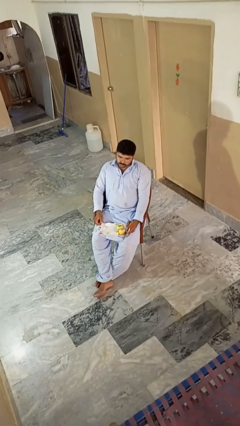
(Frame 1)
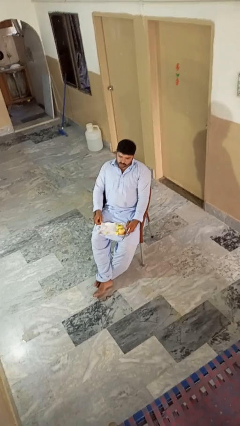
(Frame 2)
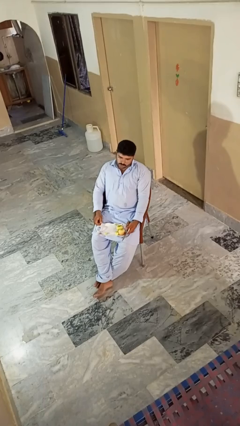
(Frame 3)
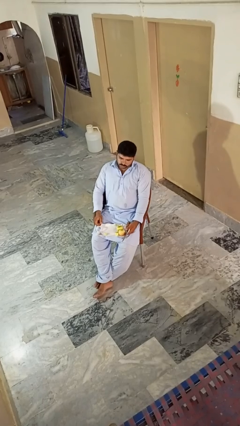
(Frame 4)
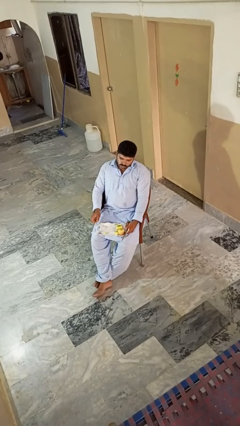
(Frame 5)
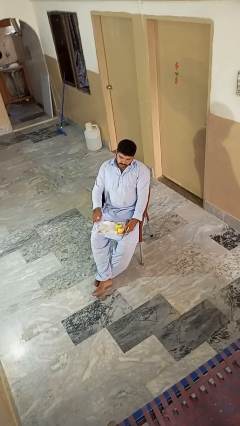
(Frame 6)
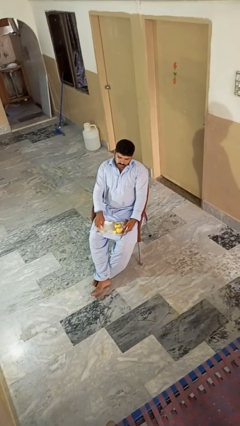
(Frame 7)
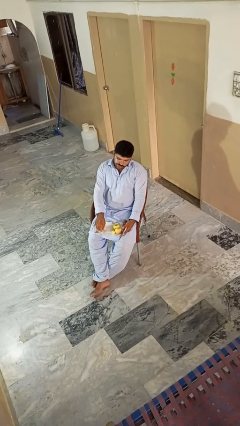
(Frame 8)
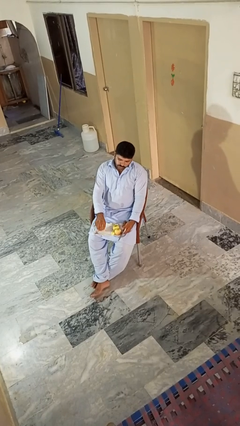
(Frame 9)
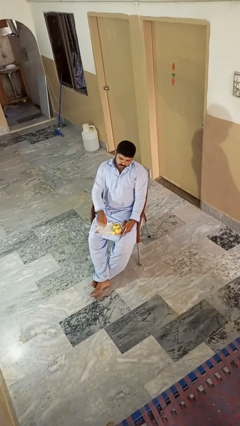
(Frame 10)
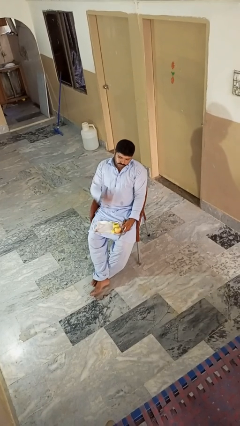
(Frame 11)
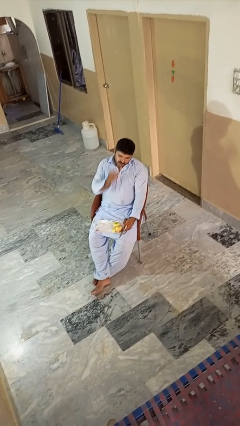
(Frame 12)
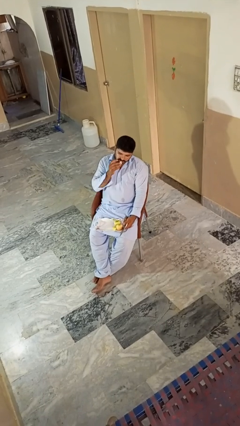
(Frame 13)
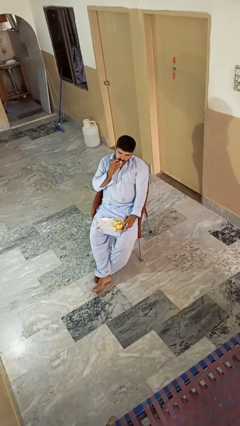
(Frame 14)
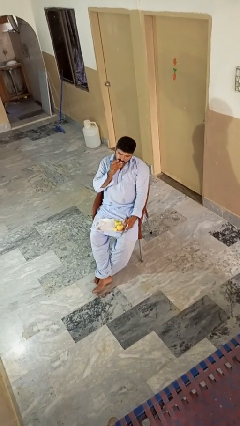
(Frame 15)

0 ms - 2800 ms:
person eats apple

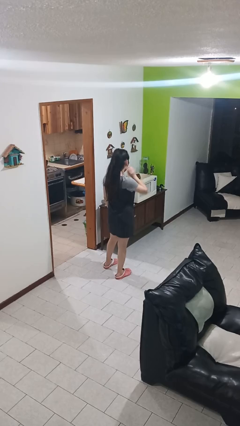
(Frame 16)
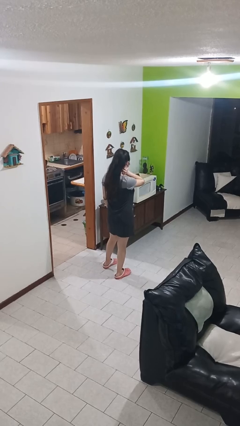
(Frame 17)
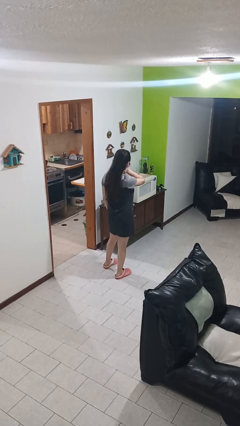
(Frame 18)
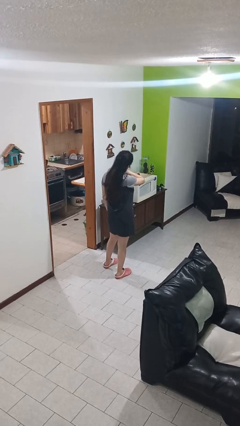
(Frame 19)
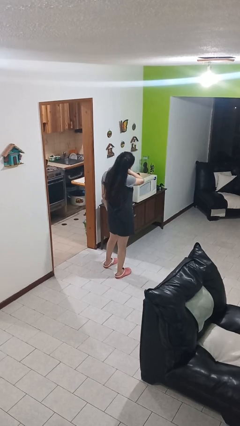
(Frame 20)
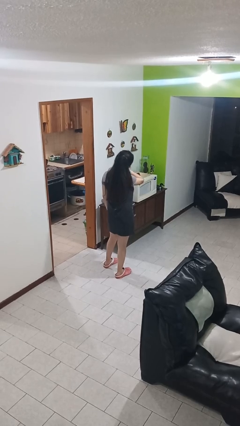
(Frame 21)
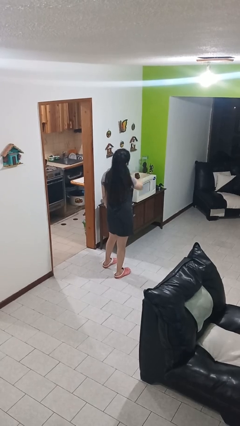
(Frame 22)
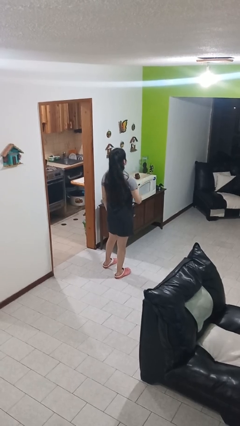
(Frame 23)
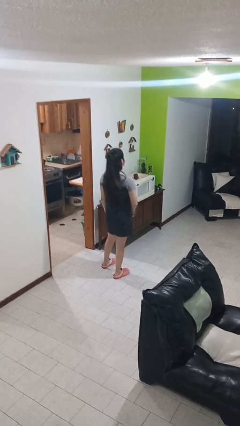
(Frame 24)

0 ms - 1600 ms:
person rubs neck

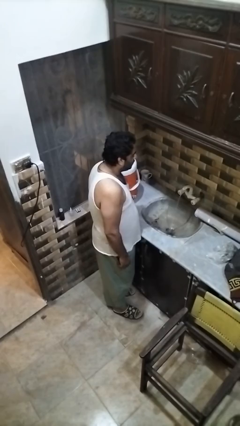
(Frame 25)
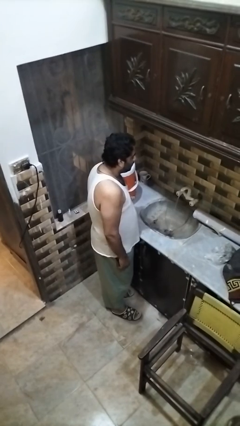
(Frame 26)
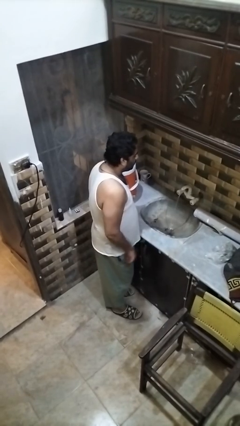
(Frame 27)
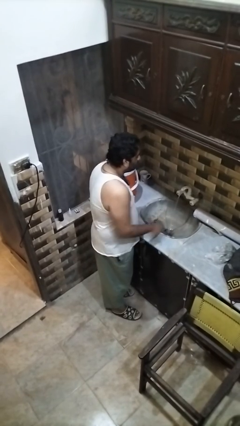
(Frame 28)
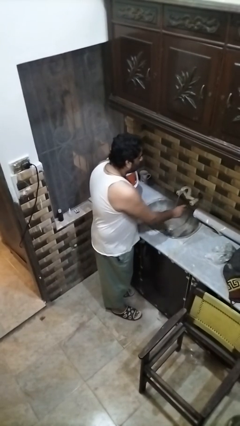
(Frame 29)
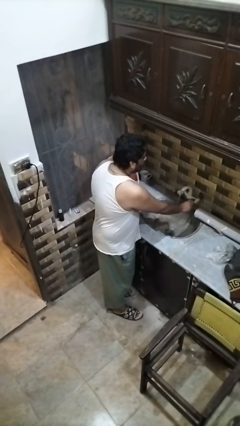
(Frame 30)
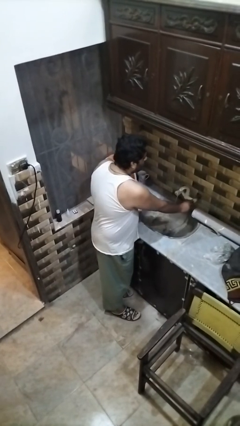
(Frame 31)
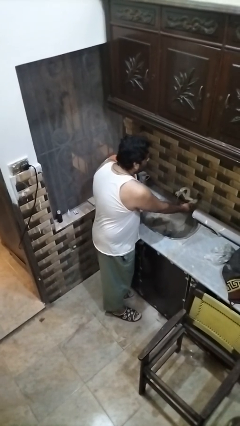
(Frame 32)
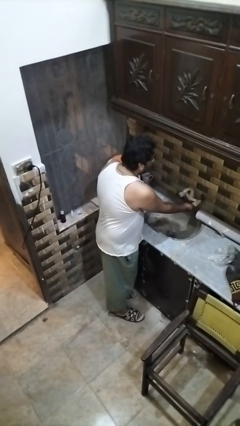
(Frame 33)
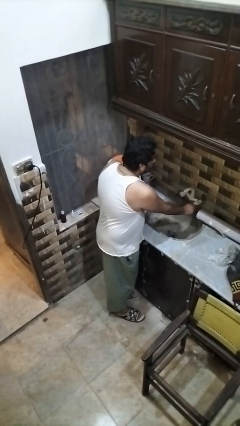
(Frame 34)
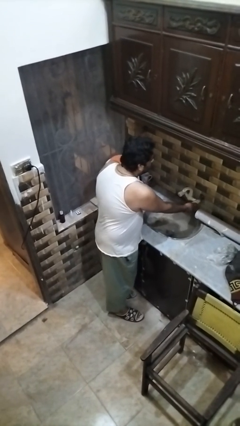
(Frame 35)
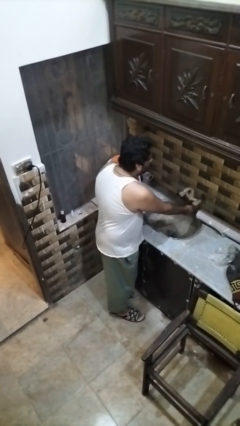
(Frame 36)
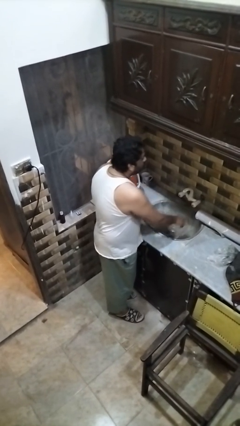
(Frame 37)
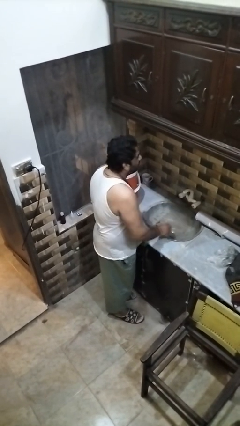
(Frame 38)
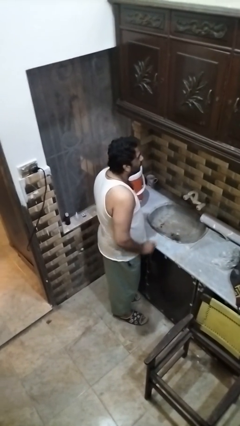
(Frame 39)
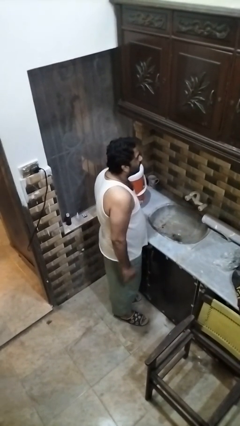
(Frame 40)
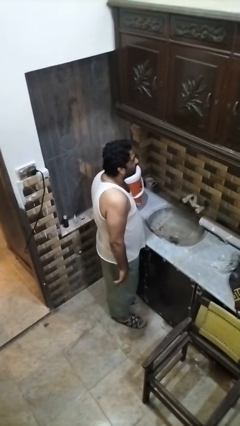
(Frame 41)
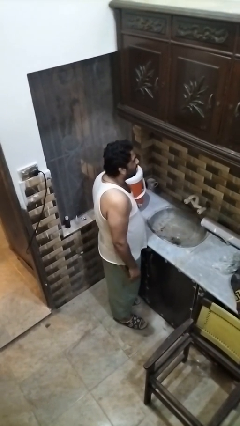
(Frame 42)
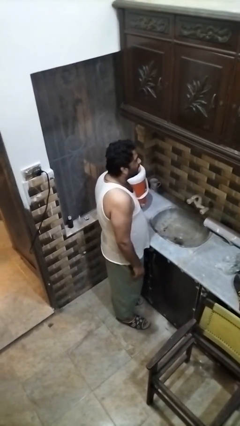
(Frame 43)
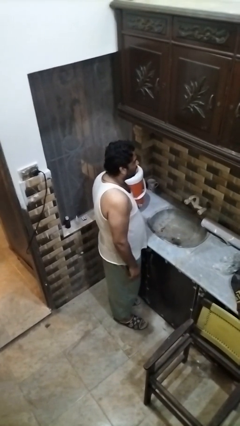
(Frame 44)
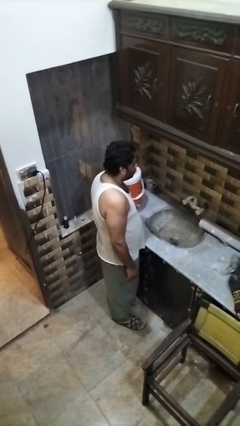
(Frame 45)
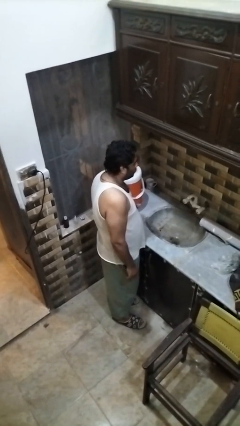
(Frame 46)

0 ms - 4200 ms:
person turns off faucet

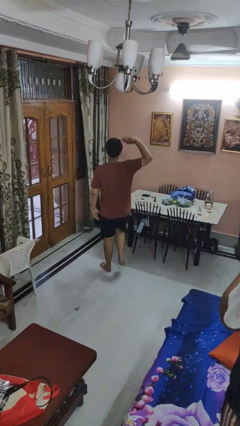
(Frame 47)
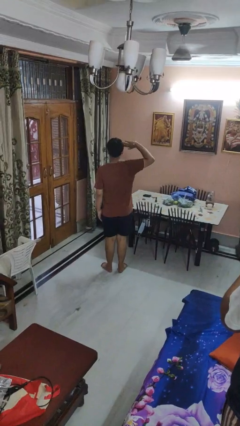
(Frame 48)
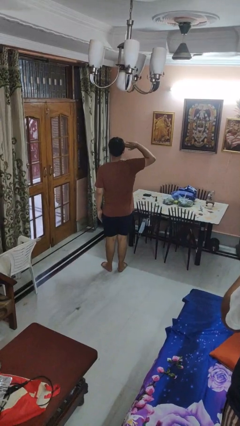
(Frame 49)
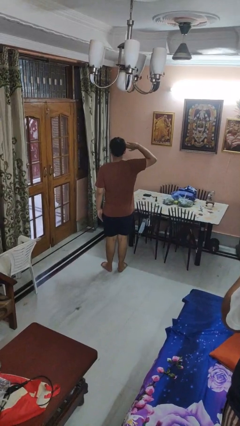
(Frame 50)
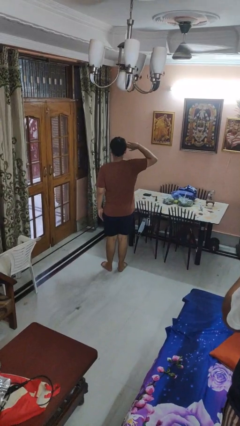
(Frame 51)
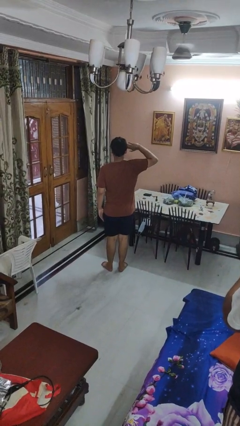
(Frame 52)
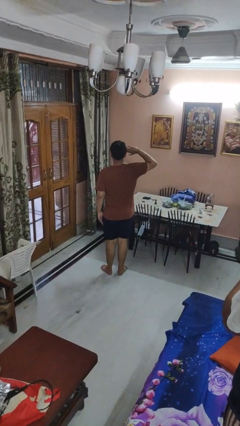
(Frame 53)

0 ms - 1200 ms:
person salutes

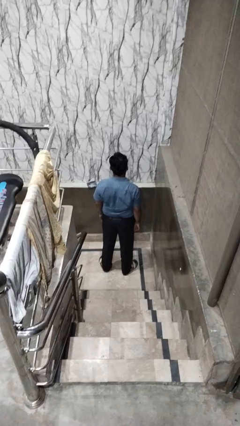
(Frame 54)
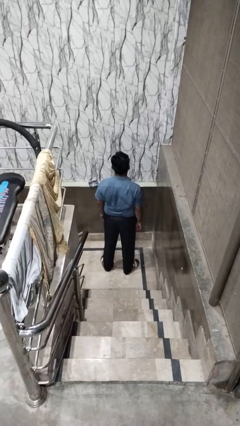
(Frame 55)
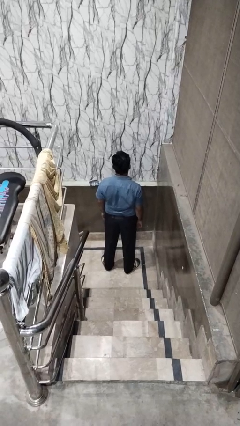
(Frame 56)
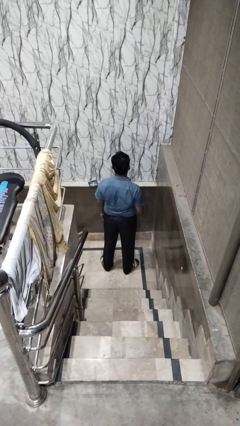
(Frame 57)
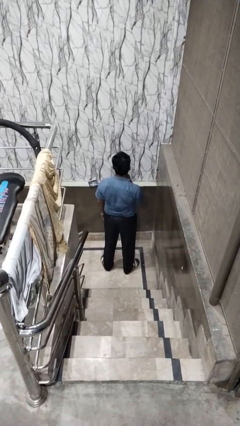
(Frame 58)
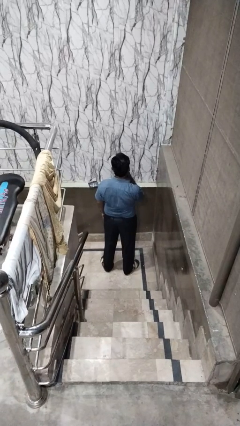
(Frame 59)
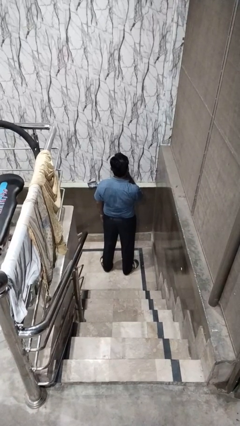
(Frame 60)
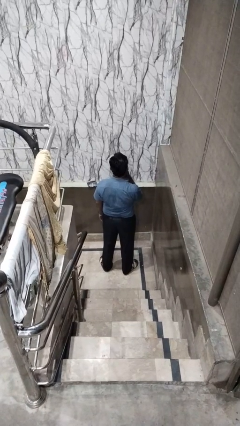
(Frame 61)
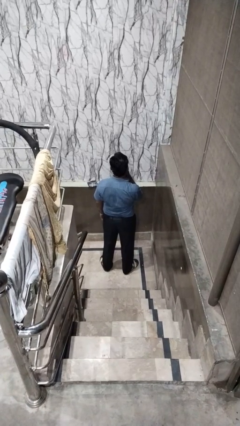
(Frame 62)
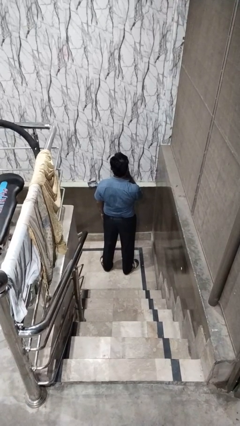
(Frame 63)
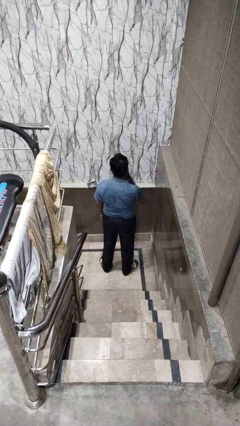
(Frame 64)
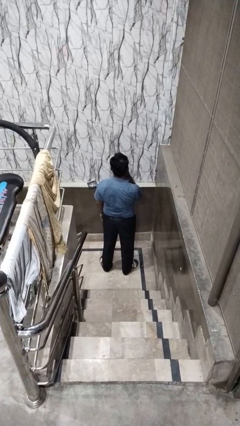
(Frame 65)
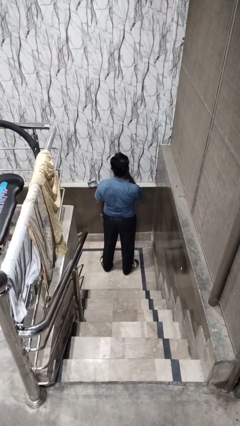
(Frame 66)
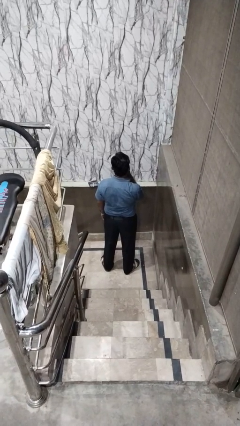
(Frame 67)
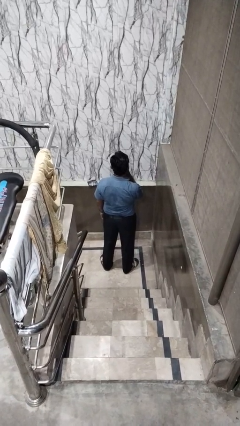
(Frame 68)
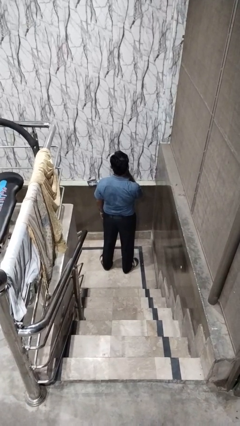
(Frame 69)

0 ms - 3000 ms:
person strokes chin

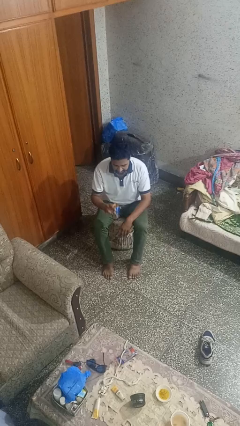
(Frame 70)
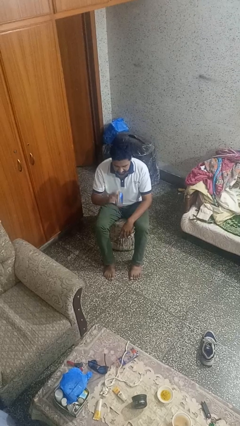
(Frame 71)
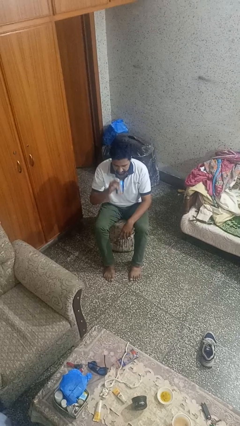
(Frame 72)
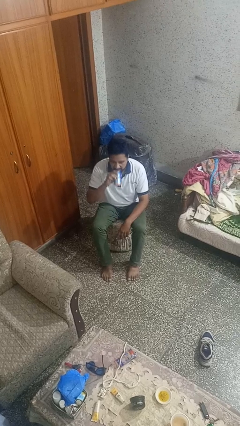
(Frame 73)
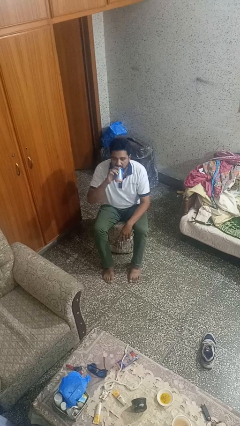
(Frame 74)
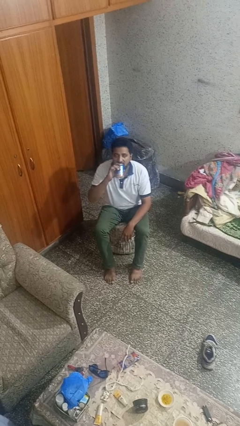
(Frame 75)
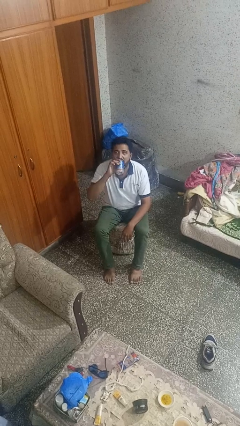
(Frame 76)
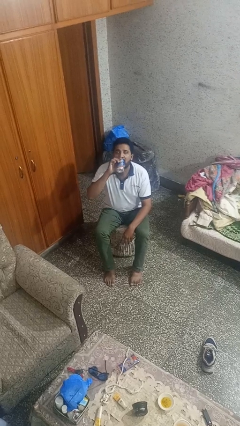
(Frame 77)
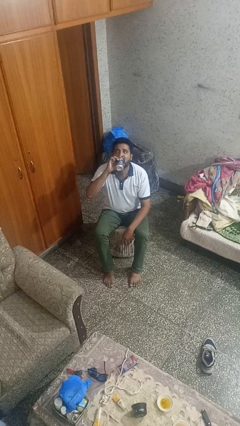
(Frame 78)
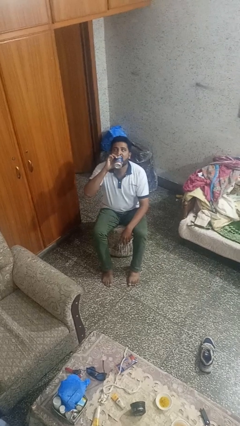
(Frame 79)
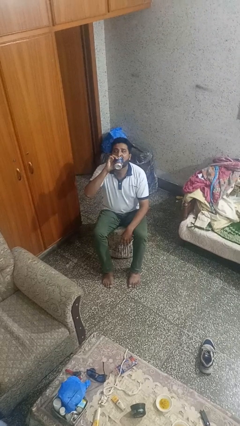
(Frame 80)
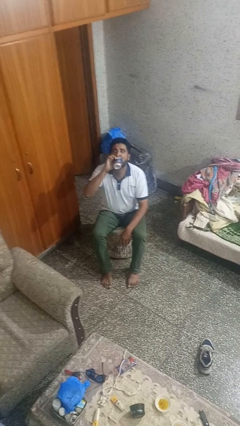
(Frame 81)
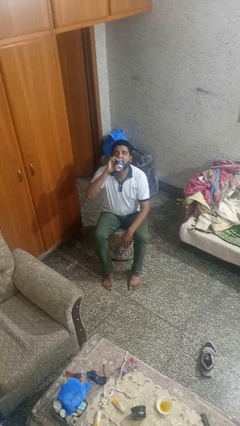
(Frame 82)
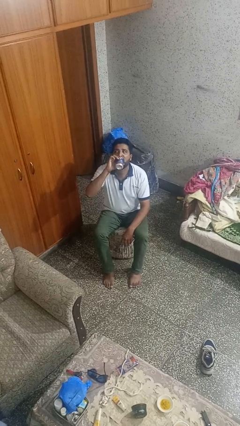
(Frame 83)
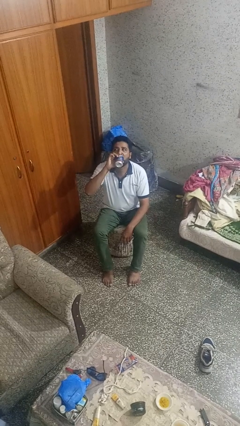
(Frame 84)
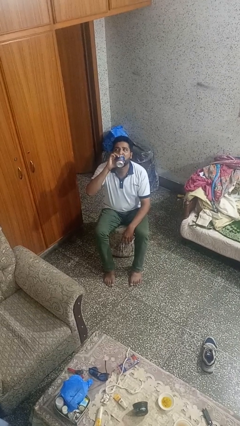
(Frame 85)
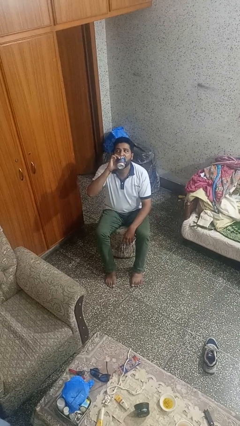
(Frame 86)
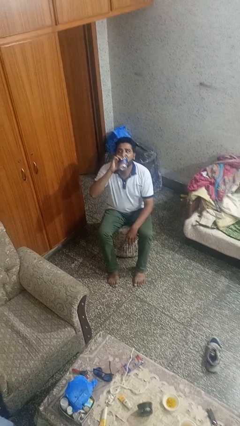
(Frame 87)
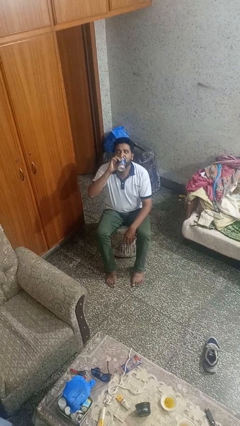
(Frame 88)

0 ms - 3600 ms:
person drinks from beverage can

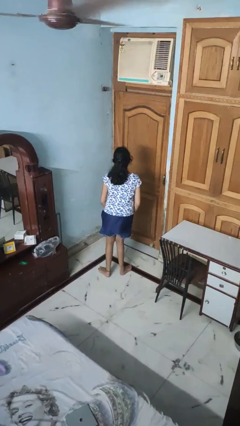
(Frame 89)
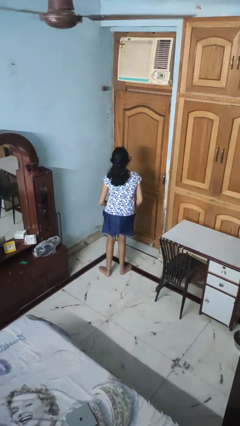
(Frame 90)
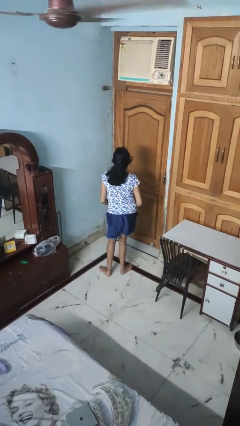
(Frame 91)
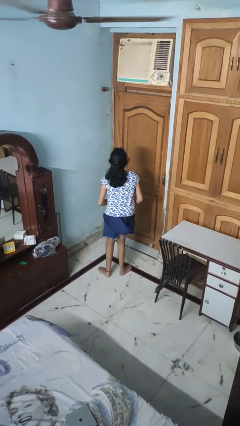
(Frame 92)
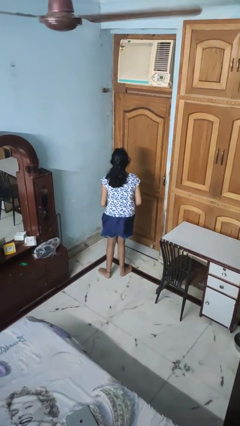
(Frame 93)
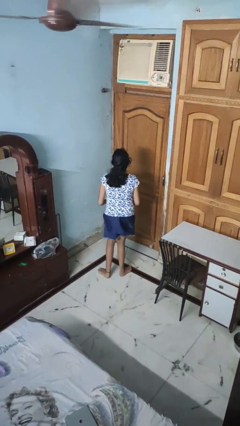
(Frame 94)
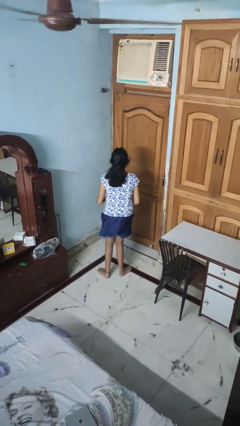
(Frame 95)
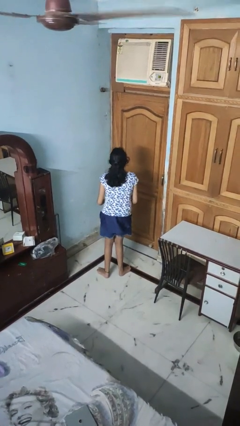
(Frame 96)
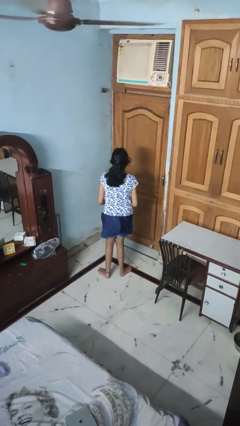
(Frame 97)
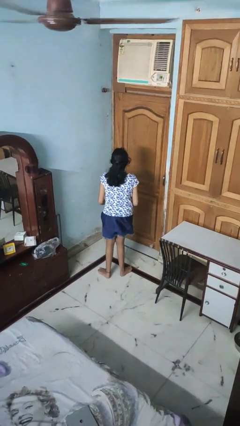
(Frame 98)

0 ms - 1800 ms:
person wiggles hips
